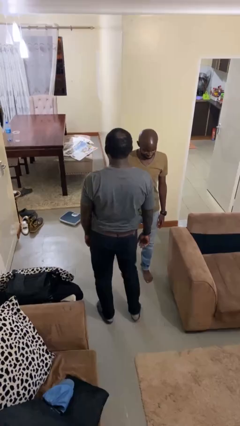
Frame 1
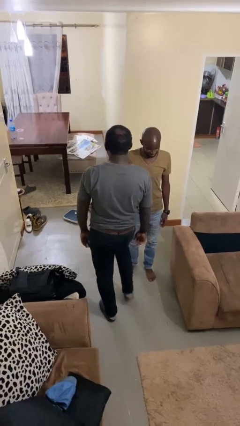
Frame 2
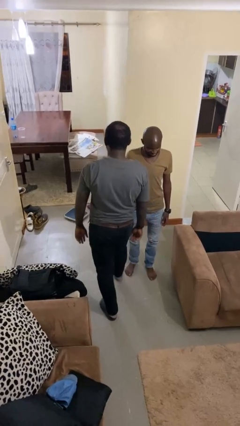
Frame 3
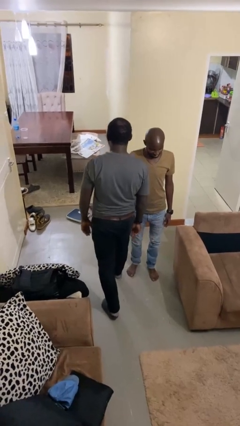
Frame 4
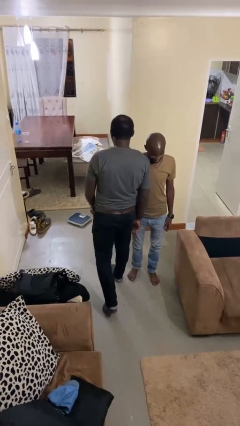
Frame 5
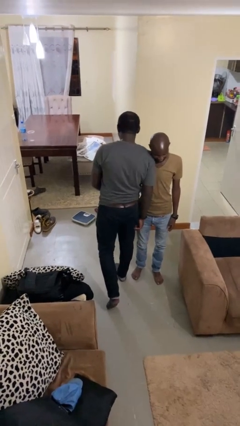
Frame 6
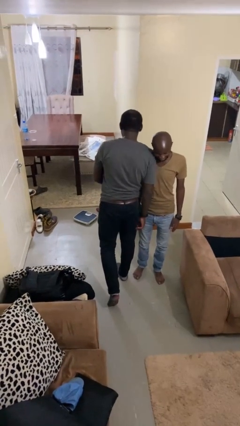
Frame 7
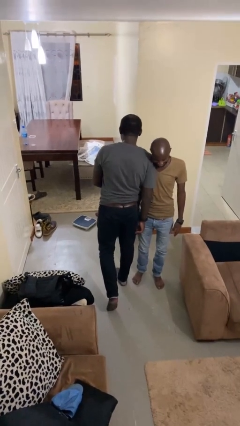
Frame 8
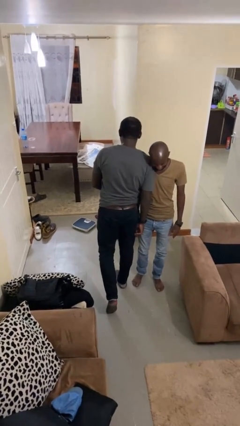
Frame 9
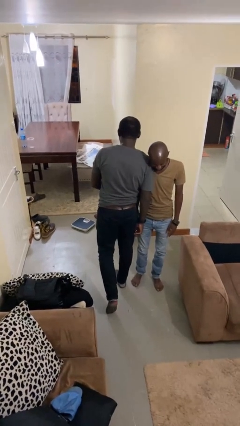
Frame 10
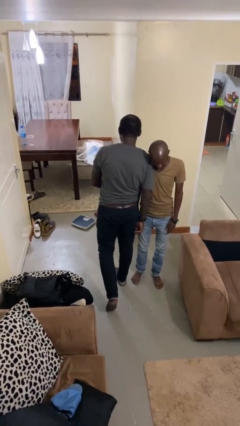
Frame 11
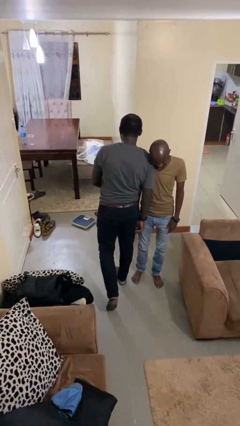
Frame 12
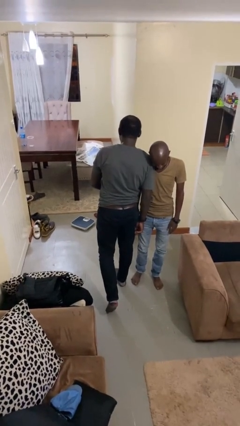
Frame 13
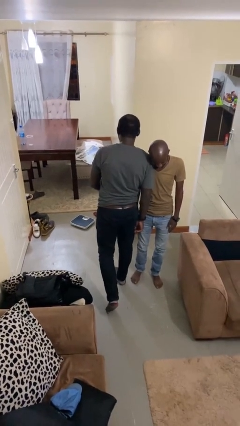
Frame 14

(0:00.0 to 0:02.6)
person bumps into person

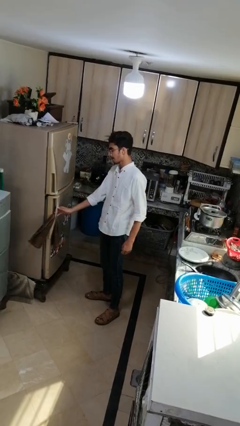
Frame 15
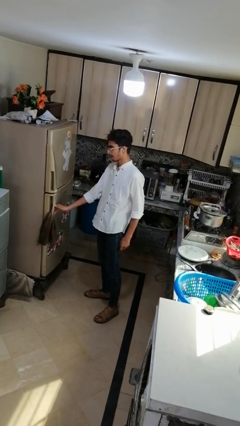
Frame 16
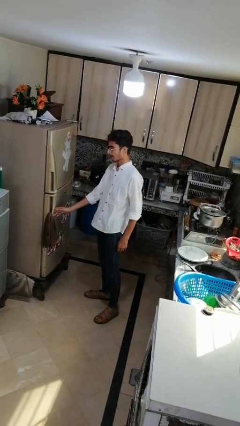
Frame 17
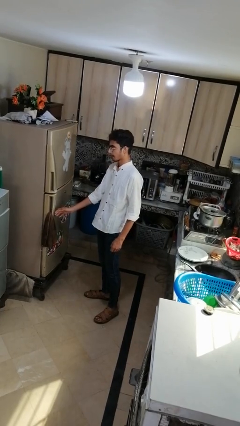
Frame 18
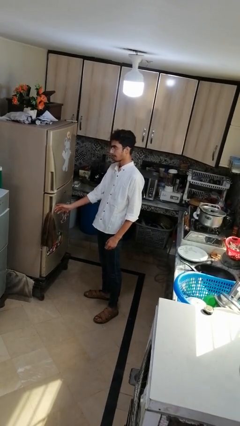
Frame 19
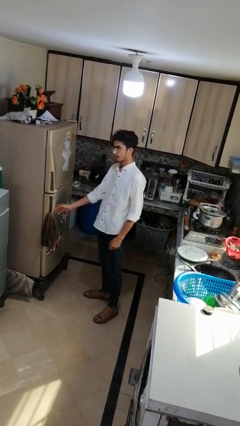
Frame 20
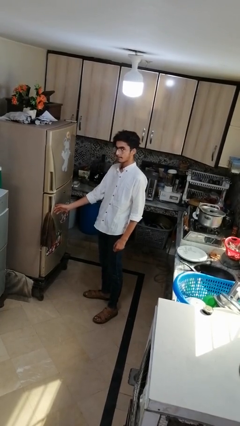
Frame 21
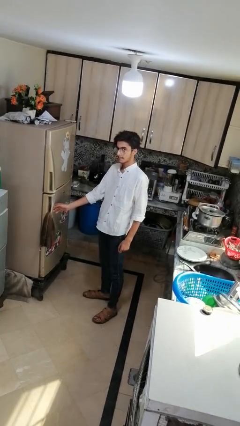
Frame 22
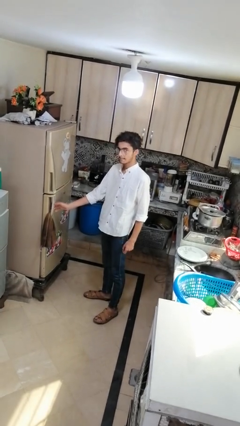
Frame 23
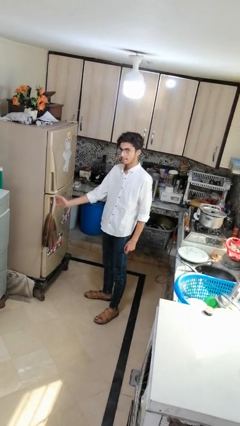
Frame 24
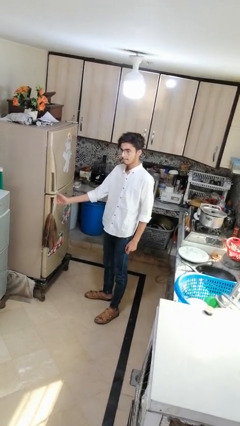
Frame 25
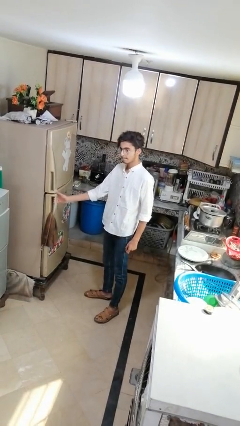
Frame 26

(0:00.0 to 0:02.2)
person closes refrigerator

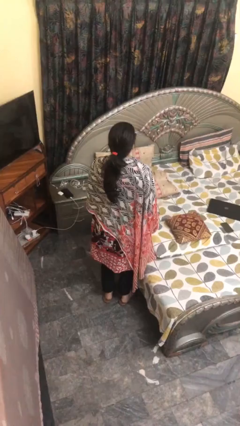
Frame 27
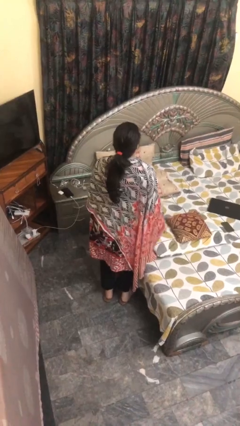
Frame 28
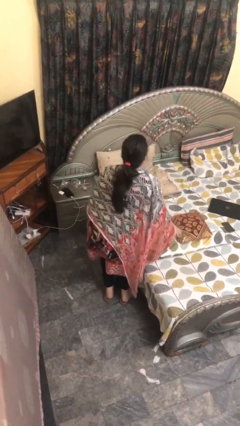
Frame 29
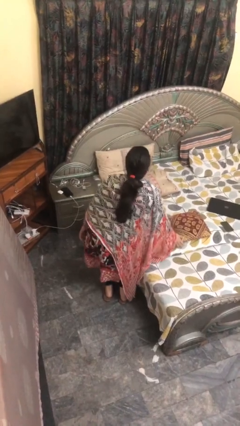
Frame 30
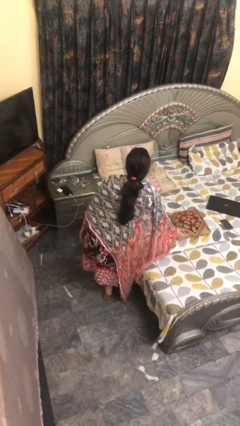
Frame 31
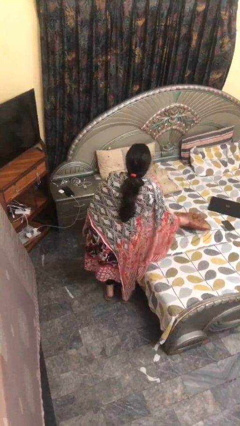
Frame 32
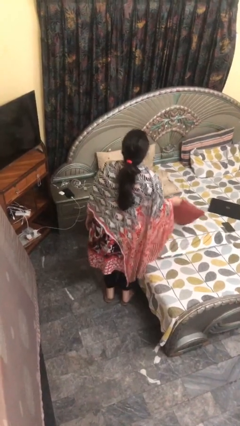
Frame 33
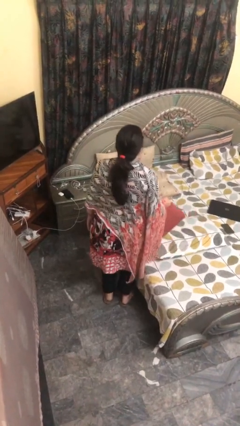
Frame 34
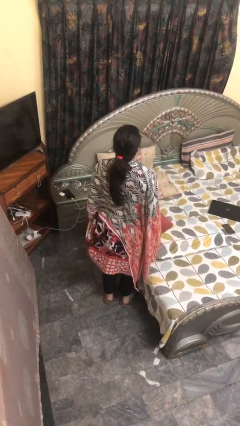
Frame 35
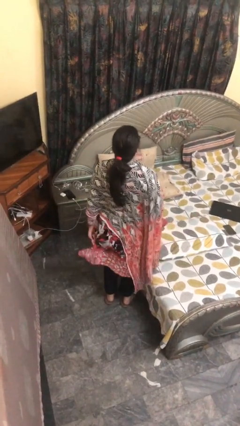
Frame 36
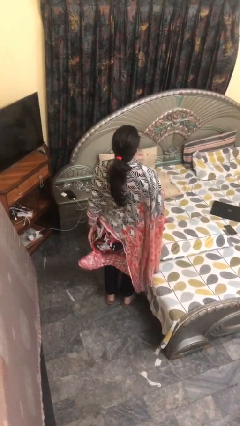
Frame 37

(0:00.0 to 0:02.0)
person picks up object from bed

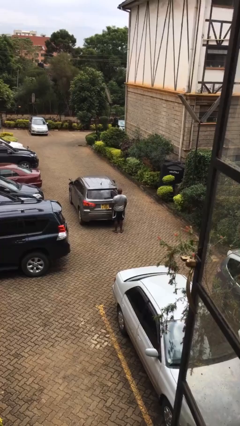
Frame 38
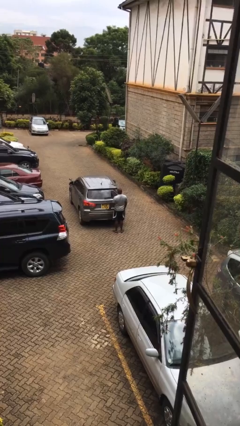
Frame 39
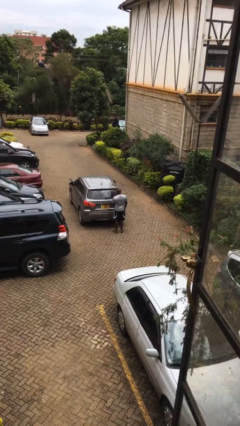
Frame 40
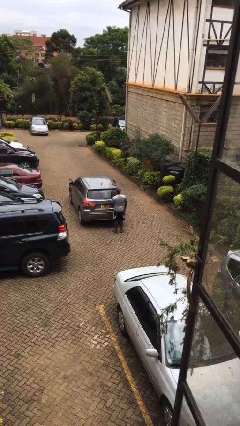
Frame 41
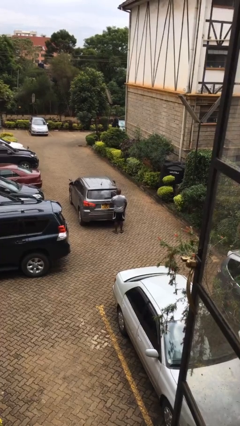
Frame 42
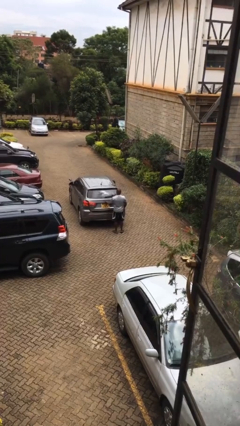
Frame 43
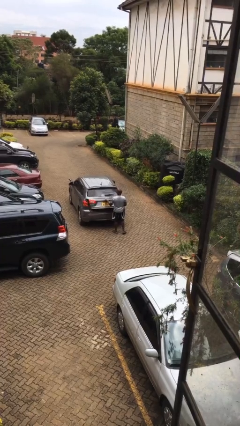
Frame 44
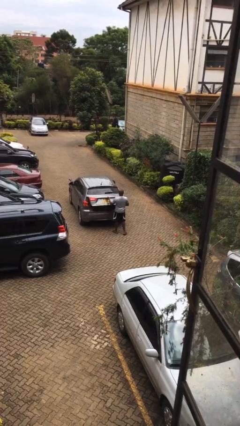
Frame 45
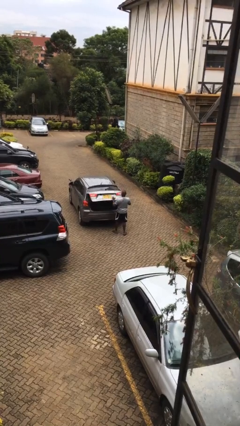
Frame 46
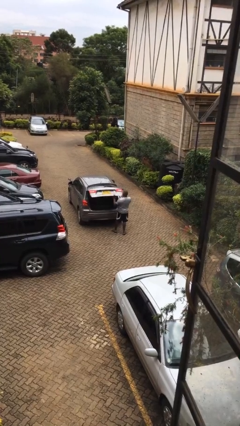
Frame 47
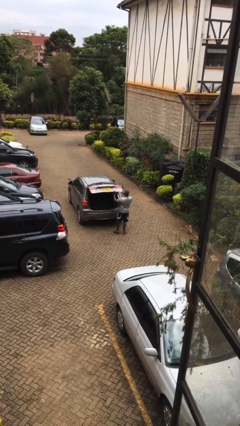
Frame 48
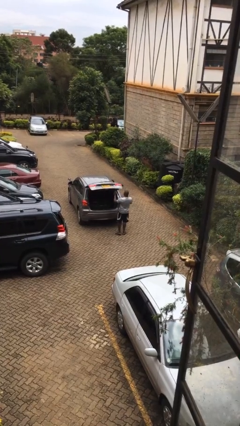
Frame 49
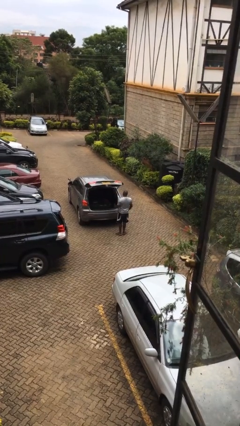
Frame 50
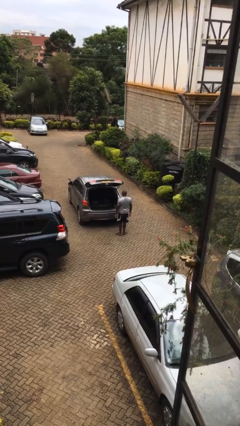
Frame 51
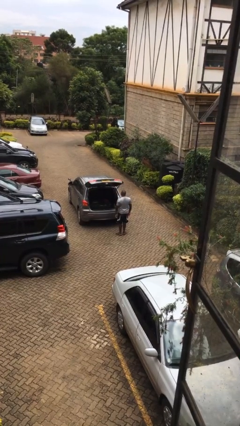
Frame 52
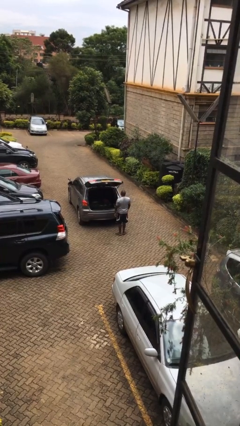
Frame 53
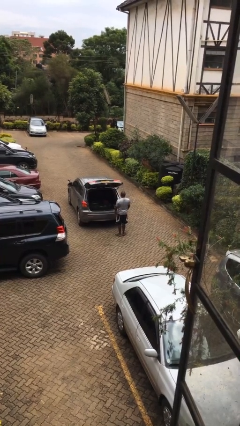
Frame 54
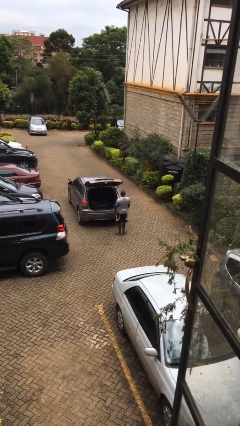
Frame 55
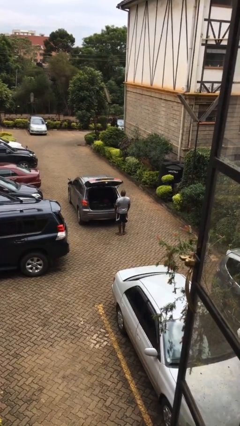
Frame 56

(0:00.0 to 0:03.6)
person opens car trunk

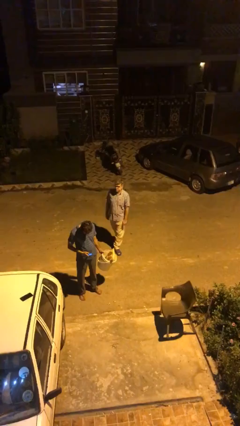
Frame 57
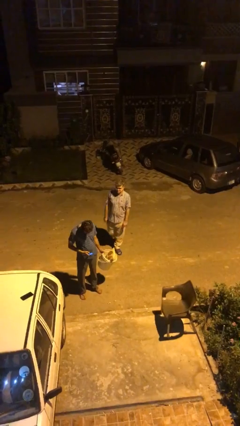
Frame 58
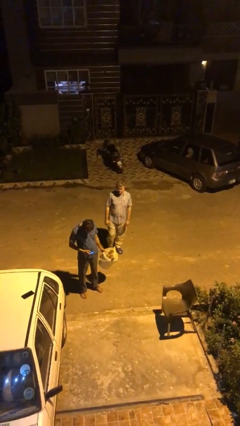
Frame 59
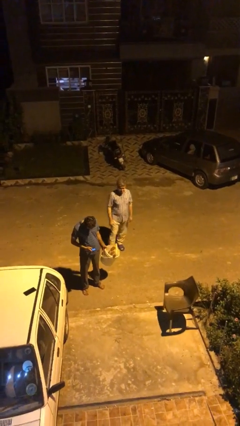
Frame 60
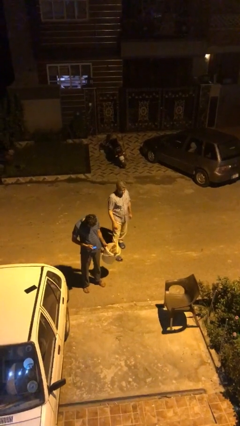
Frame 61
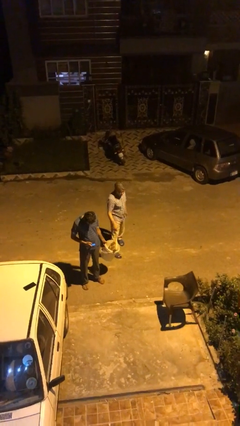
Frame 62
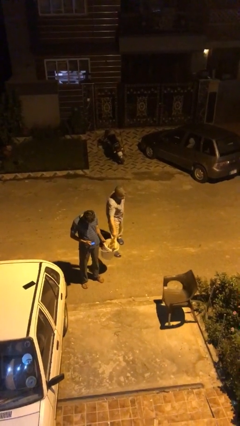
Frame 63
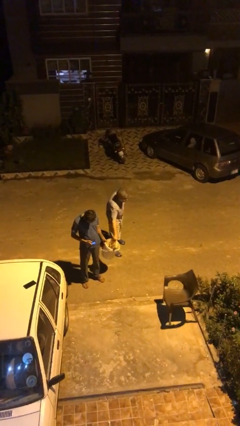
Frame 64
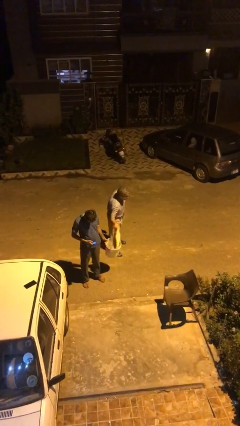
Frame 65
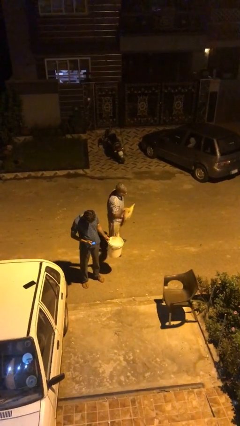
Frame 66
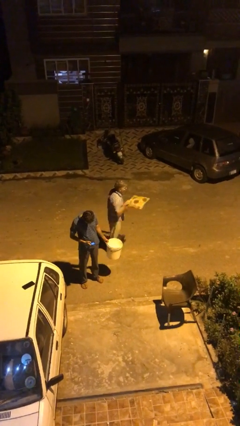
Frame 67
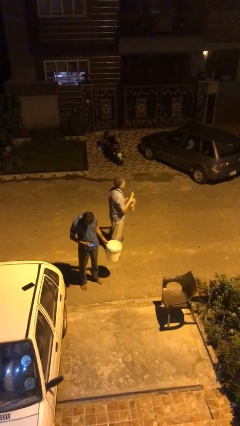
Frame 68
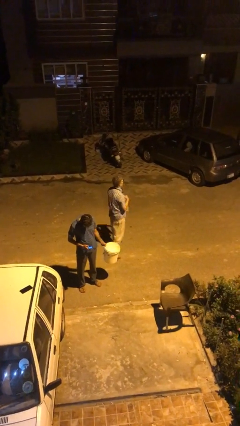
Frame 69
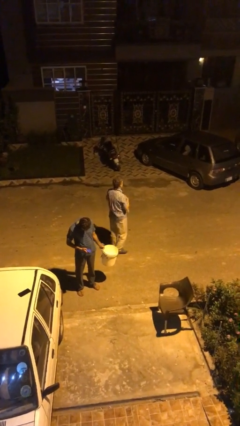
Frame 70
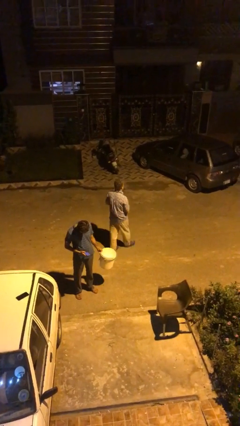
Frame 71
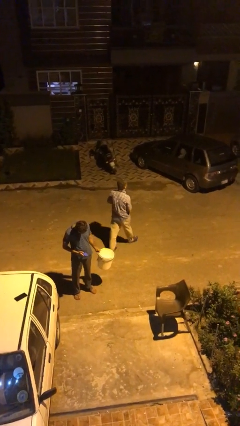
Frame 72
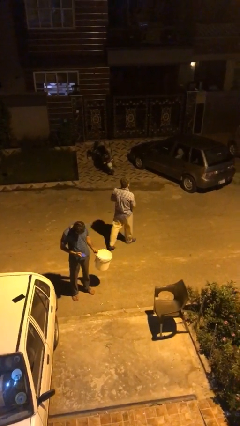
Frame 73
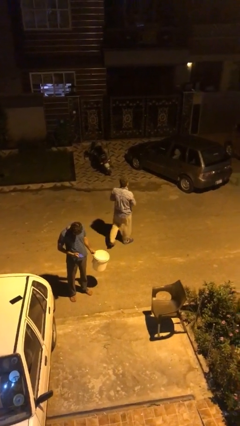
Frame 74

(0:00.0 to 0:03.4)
person steals object from person

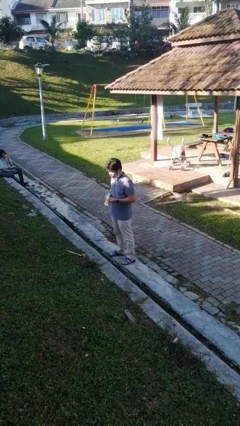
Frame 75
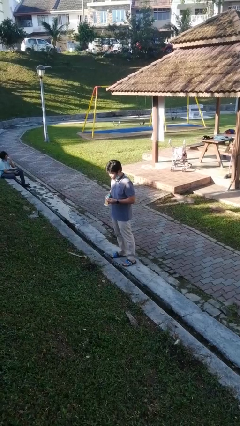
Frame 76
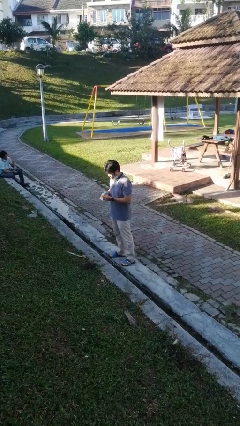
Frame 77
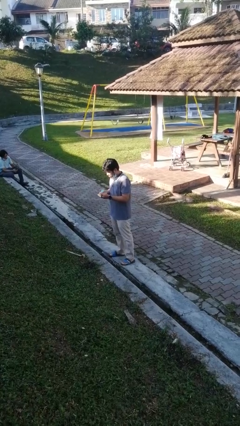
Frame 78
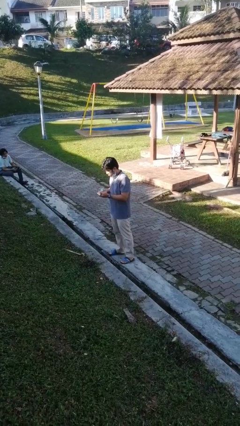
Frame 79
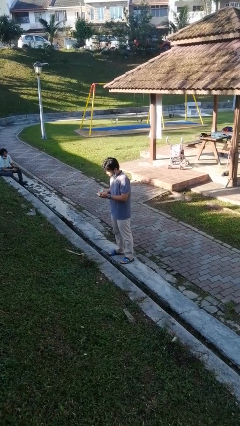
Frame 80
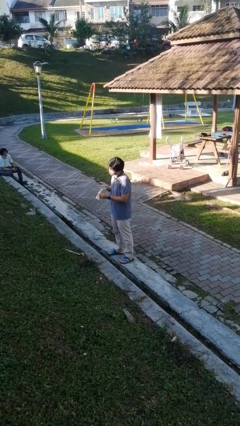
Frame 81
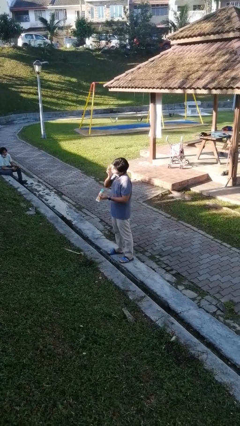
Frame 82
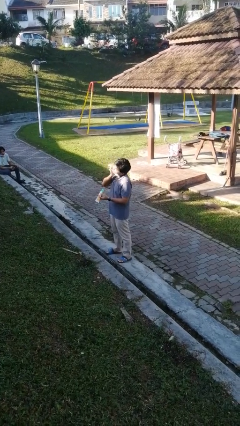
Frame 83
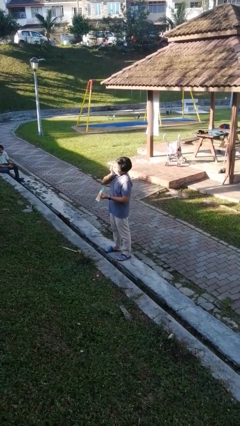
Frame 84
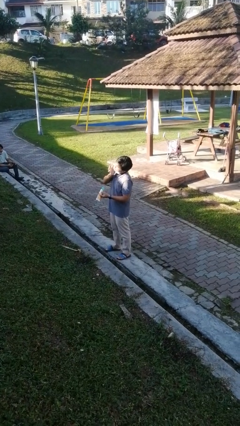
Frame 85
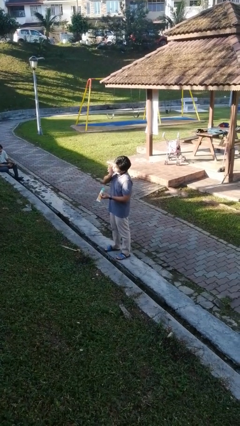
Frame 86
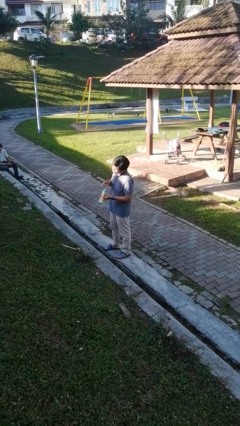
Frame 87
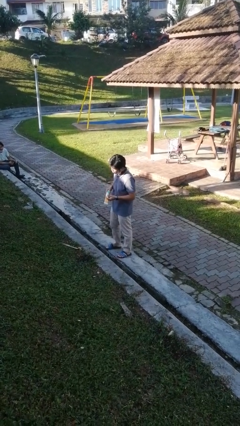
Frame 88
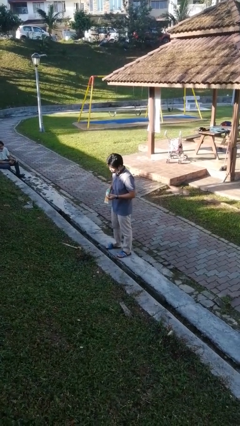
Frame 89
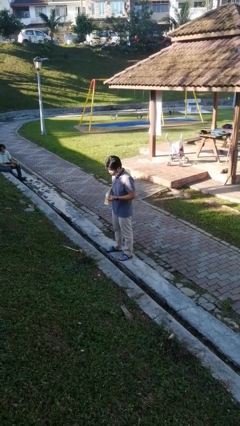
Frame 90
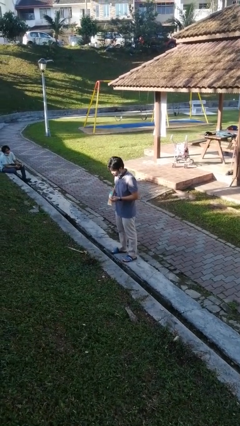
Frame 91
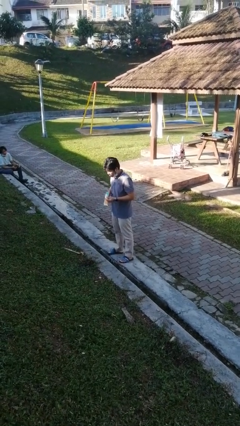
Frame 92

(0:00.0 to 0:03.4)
person applies facial moisturizer

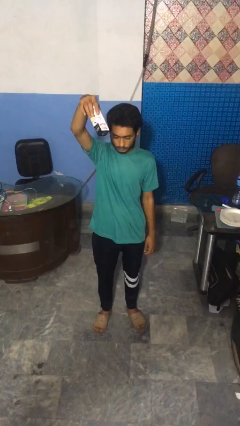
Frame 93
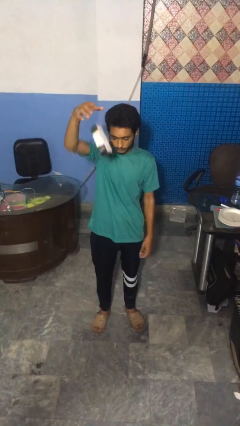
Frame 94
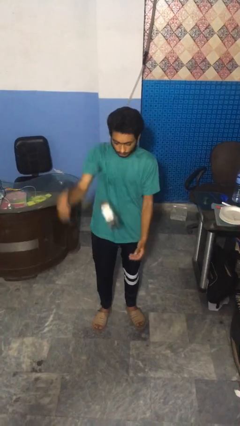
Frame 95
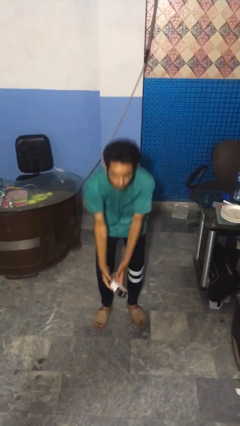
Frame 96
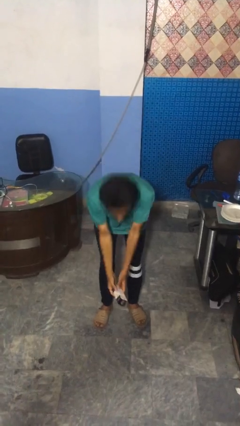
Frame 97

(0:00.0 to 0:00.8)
person drops object
